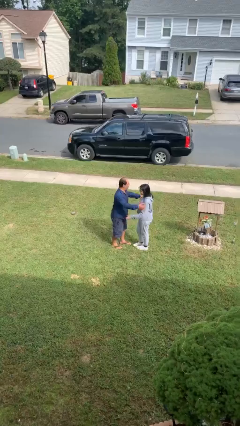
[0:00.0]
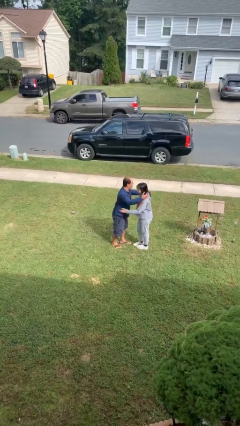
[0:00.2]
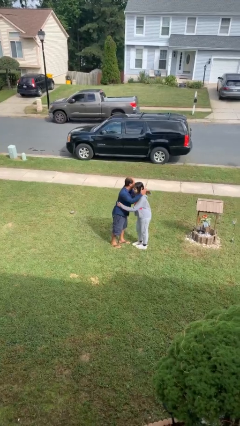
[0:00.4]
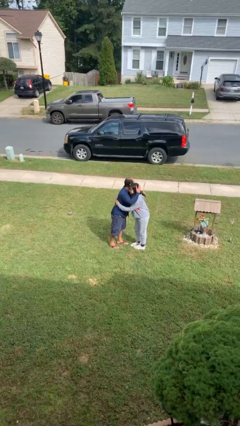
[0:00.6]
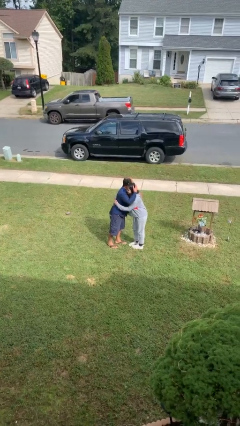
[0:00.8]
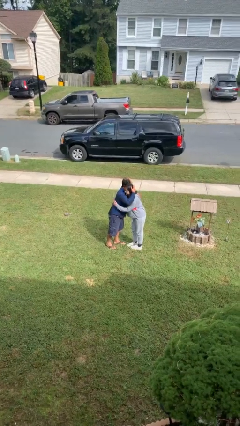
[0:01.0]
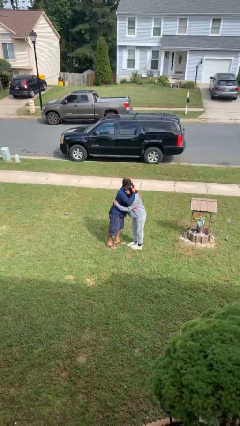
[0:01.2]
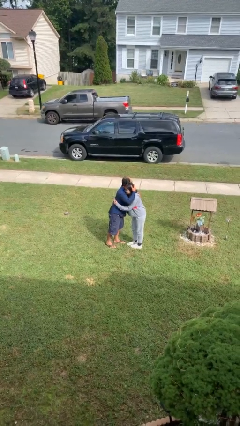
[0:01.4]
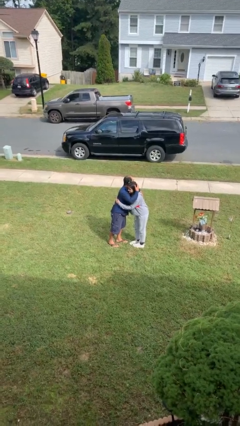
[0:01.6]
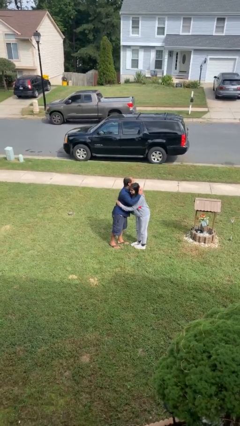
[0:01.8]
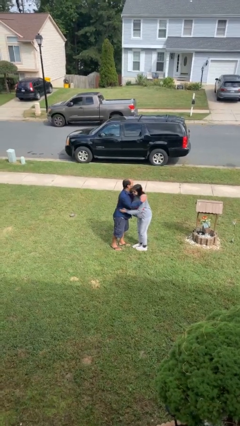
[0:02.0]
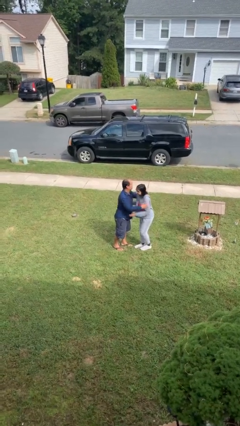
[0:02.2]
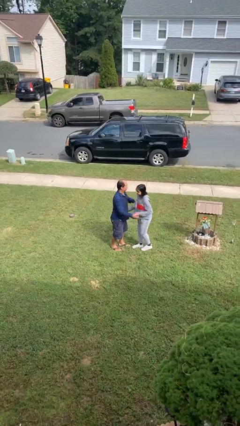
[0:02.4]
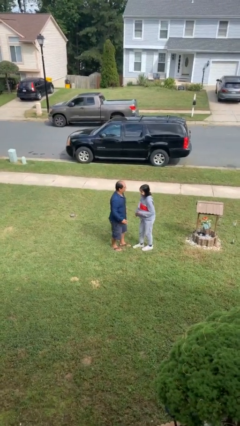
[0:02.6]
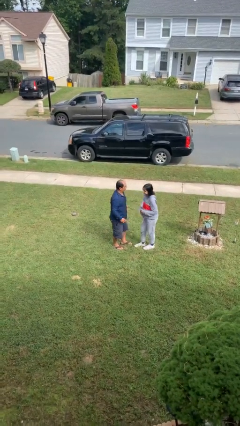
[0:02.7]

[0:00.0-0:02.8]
person embraces person

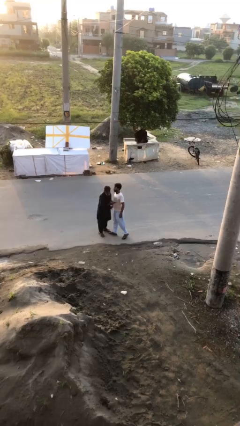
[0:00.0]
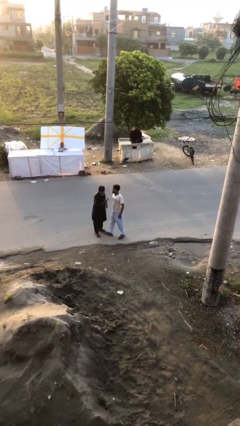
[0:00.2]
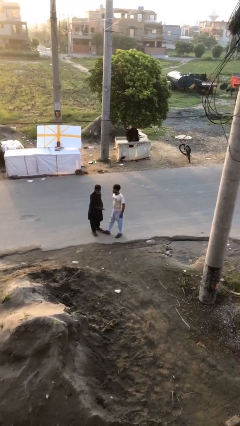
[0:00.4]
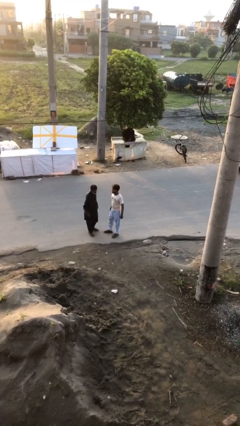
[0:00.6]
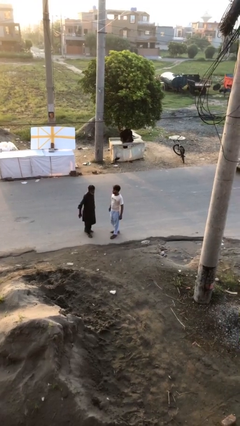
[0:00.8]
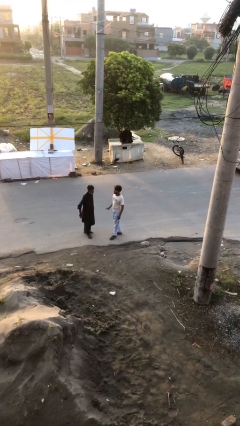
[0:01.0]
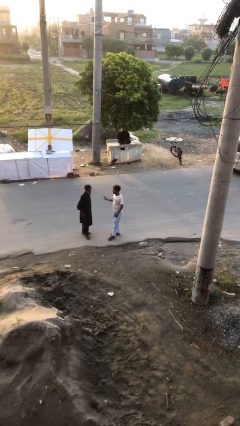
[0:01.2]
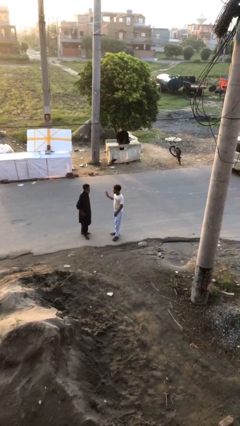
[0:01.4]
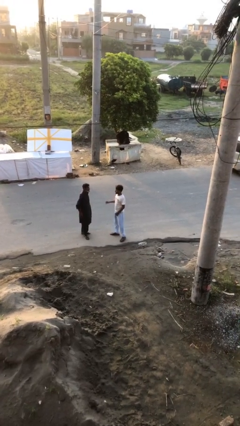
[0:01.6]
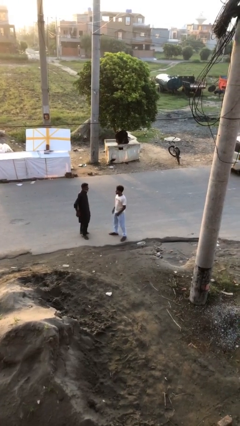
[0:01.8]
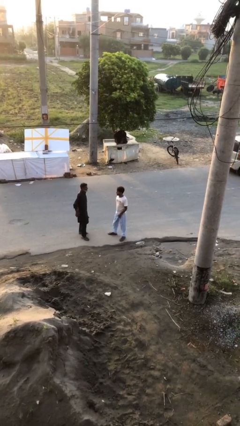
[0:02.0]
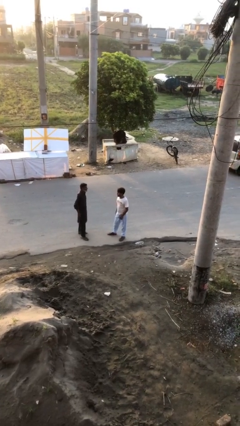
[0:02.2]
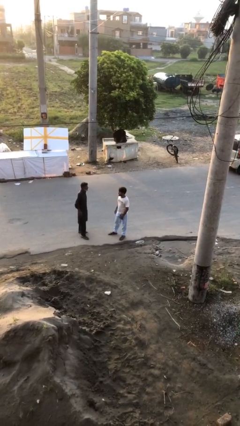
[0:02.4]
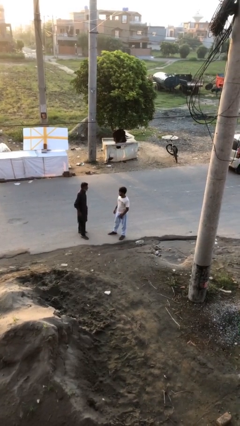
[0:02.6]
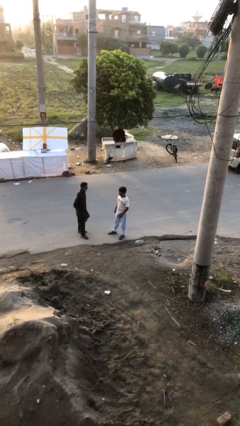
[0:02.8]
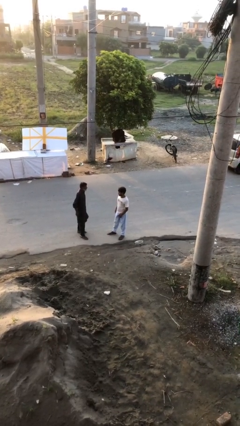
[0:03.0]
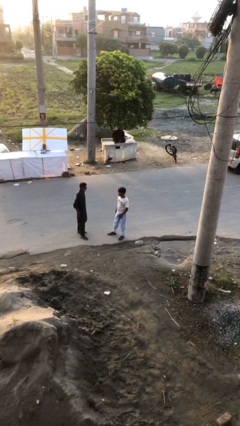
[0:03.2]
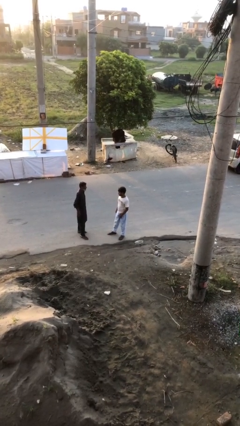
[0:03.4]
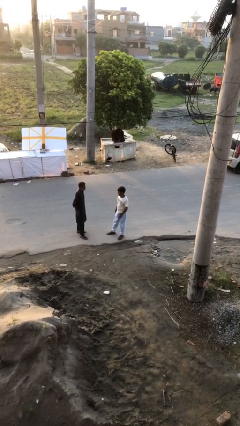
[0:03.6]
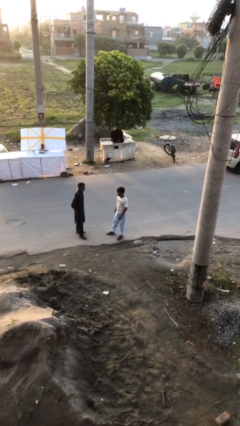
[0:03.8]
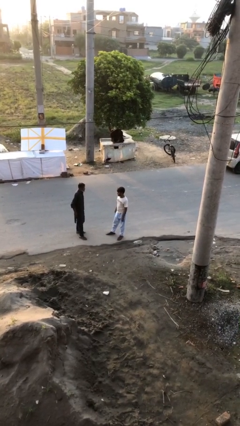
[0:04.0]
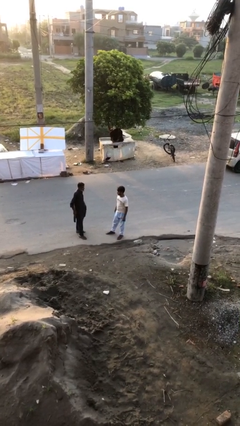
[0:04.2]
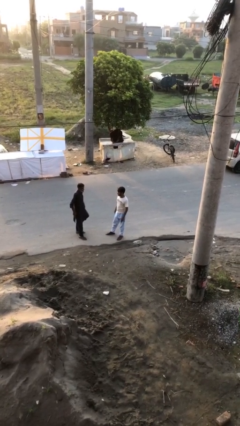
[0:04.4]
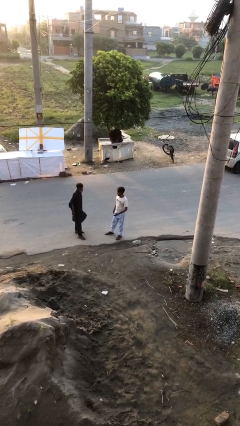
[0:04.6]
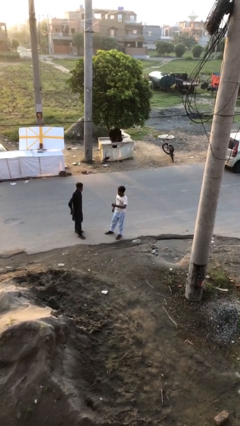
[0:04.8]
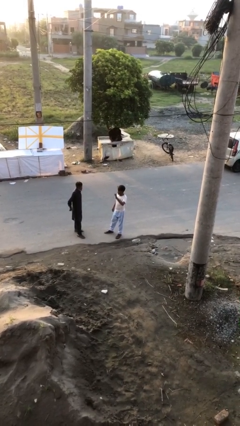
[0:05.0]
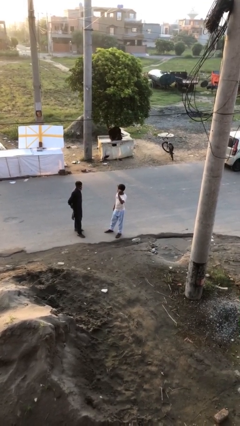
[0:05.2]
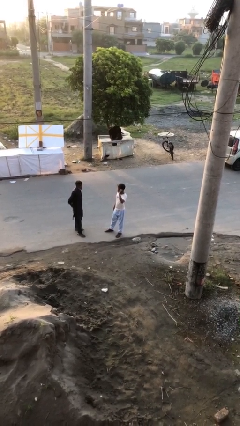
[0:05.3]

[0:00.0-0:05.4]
person talks to person

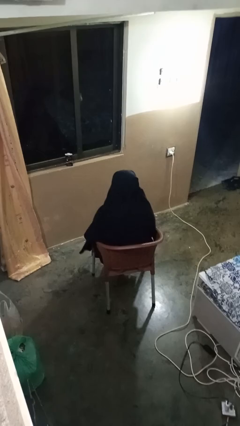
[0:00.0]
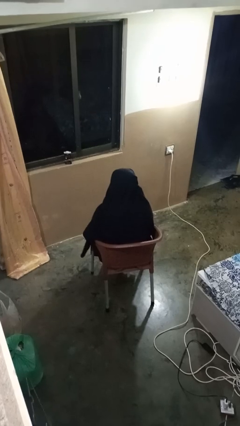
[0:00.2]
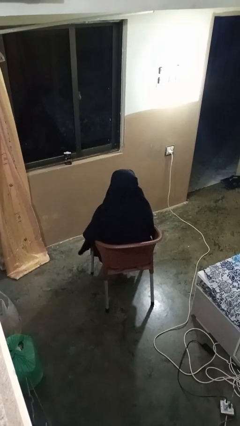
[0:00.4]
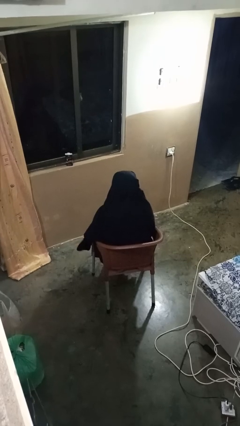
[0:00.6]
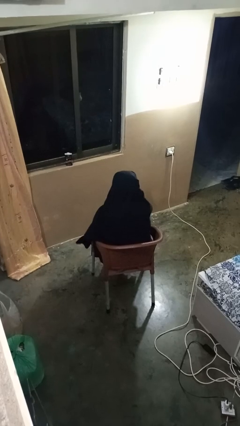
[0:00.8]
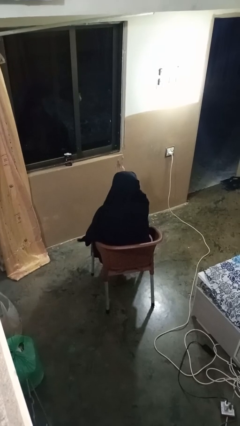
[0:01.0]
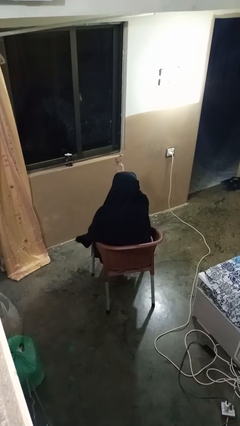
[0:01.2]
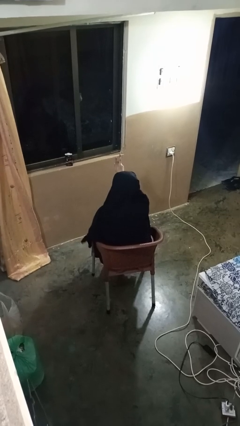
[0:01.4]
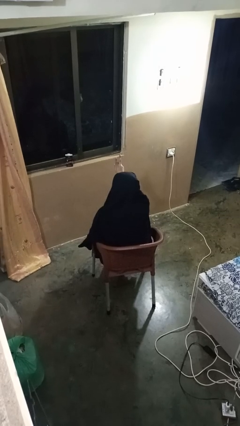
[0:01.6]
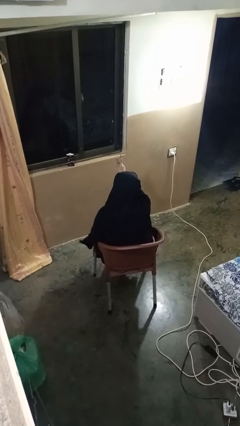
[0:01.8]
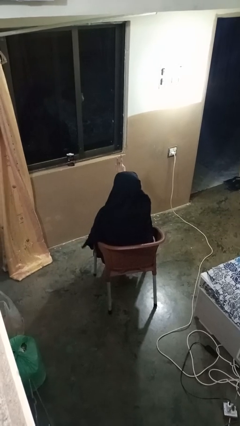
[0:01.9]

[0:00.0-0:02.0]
person gestures peace

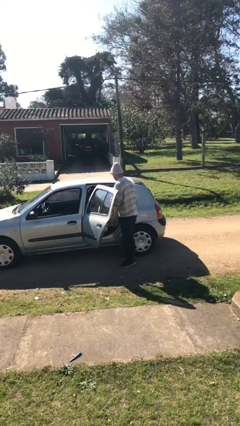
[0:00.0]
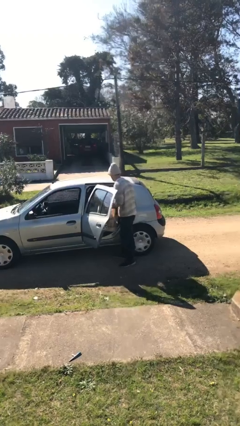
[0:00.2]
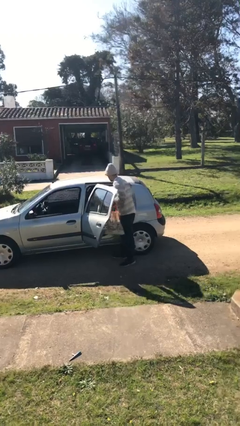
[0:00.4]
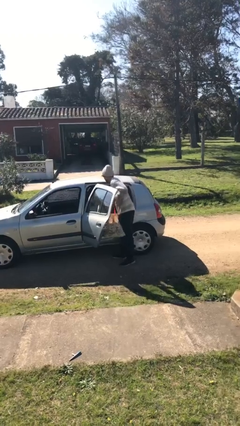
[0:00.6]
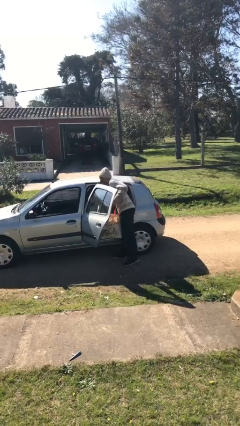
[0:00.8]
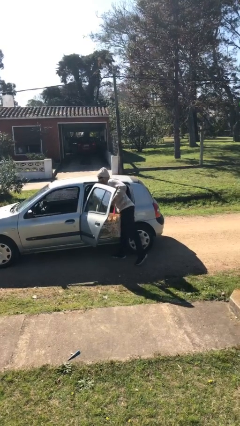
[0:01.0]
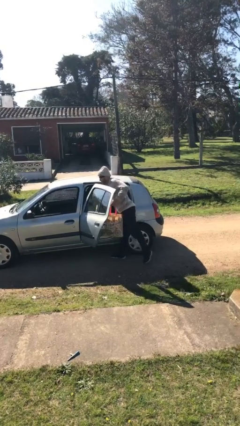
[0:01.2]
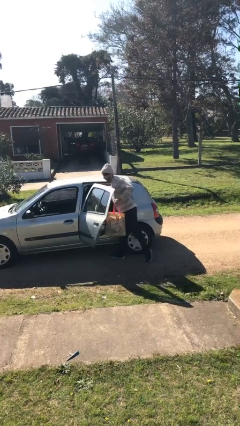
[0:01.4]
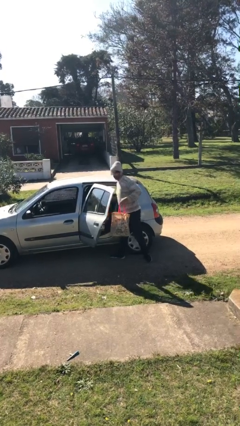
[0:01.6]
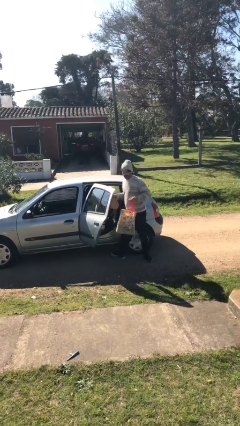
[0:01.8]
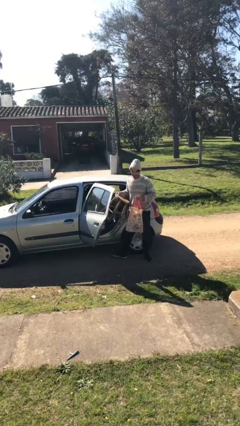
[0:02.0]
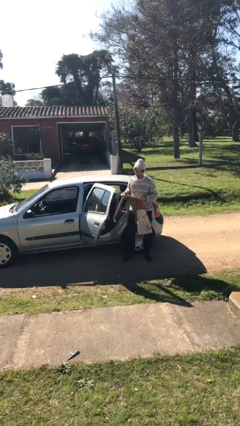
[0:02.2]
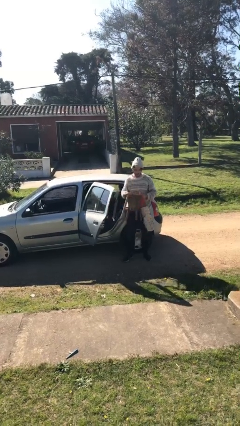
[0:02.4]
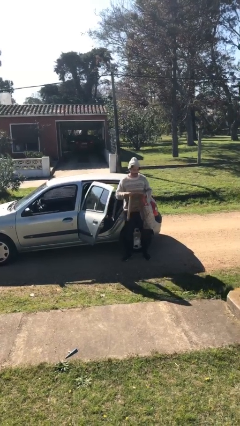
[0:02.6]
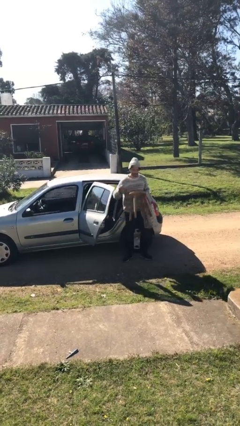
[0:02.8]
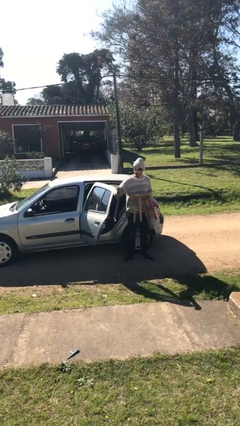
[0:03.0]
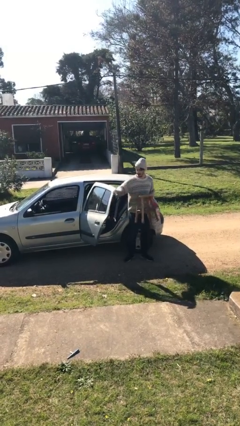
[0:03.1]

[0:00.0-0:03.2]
person unloads car

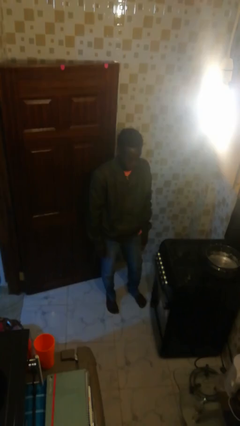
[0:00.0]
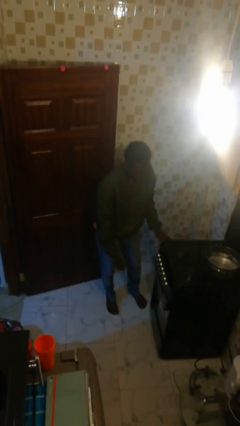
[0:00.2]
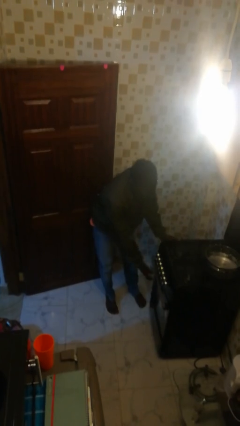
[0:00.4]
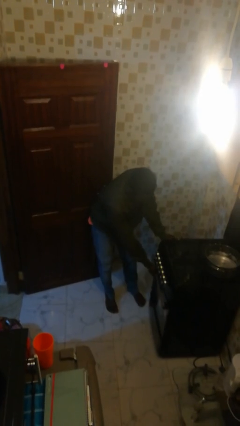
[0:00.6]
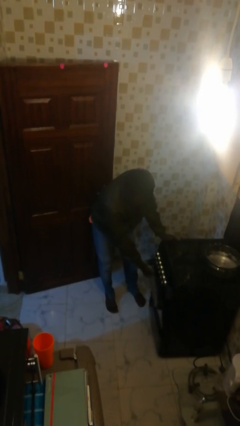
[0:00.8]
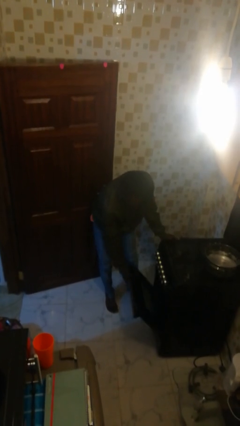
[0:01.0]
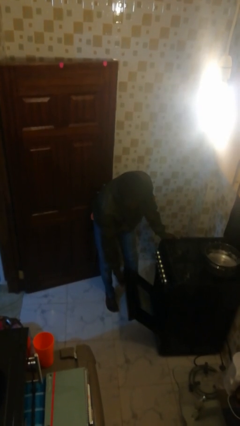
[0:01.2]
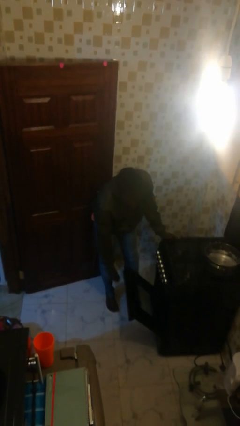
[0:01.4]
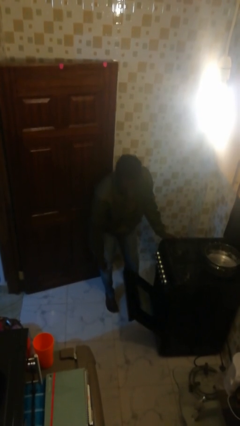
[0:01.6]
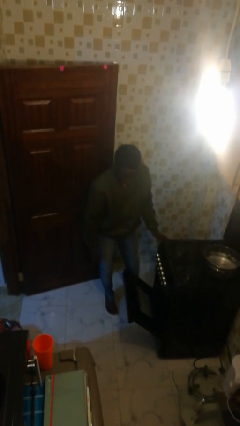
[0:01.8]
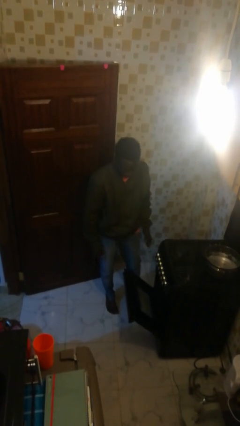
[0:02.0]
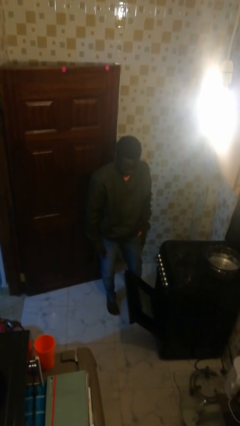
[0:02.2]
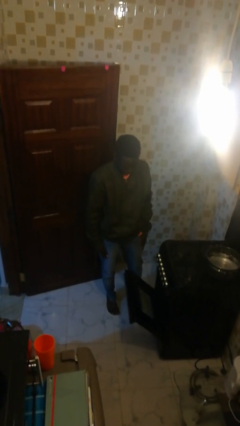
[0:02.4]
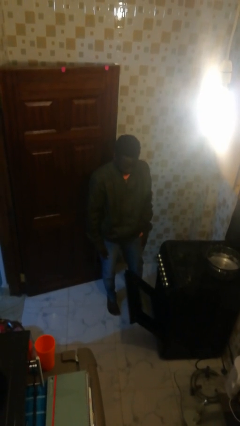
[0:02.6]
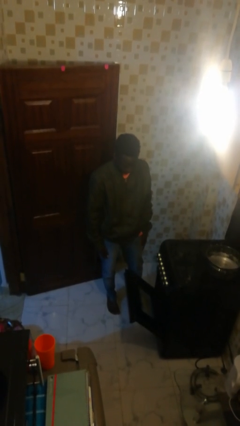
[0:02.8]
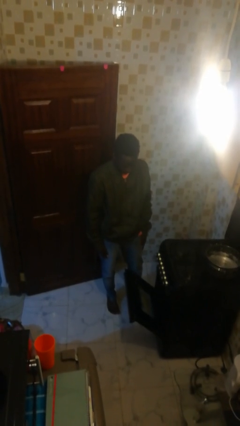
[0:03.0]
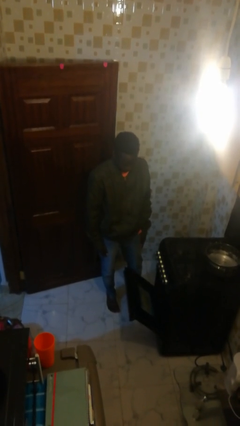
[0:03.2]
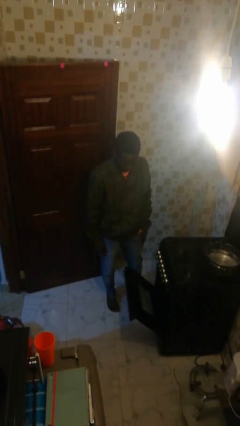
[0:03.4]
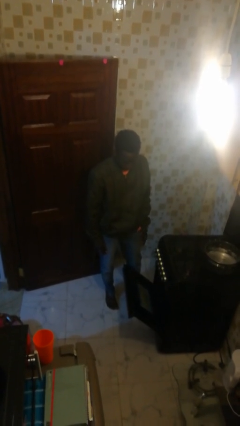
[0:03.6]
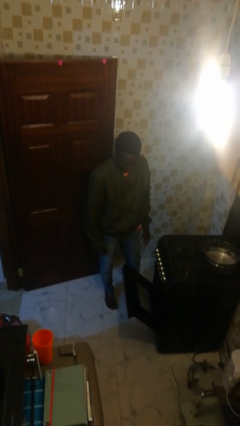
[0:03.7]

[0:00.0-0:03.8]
person opens oven door
